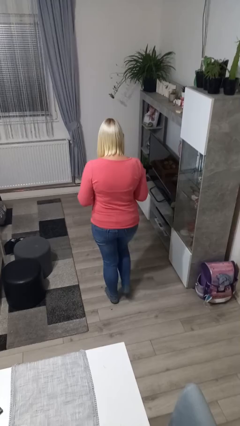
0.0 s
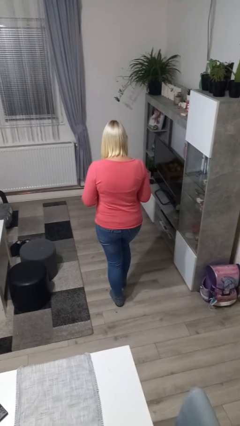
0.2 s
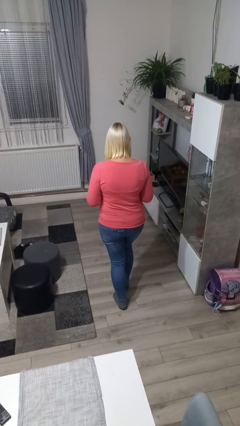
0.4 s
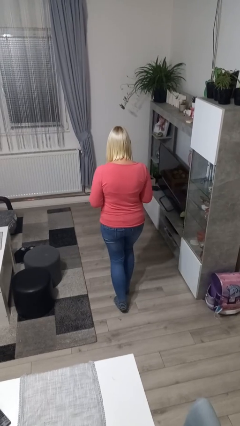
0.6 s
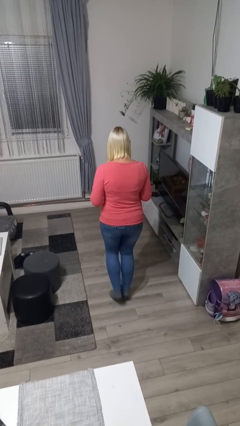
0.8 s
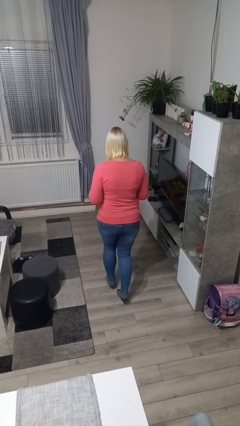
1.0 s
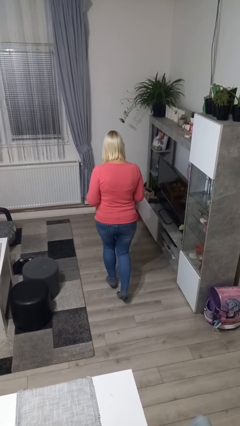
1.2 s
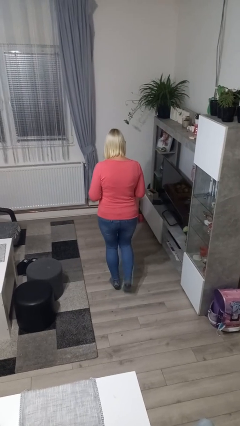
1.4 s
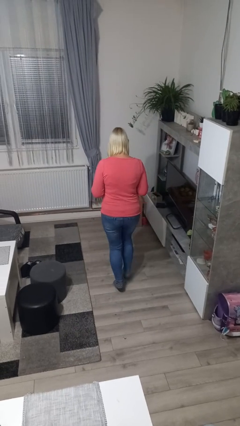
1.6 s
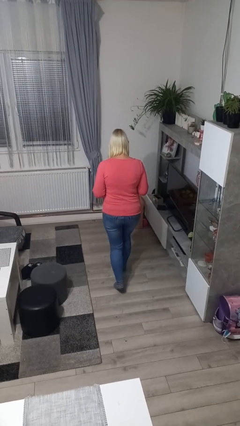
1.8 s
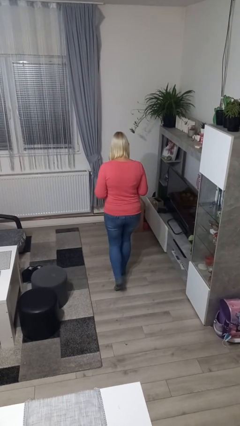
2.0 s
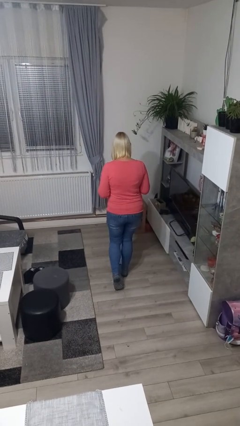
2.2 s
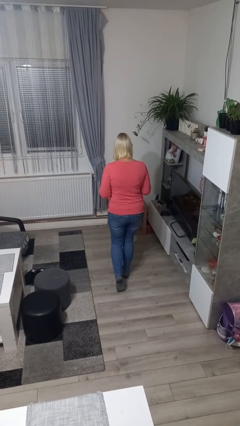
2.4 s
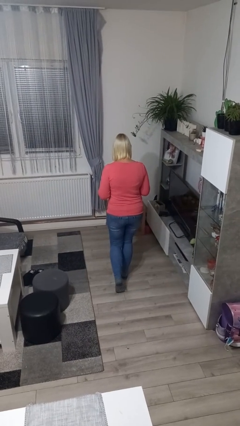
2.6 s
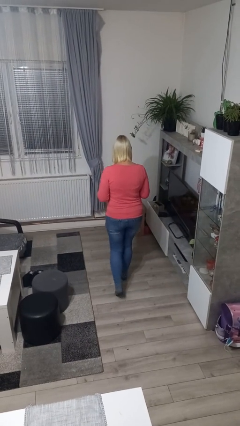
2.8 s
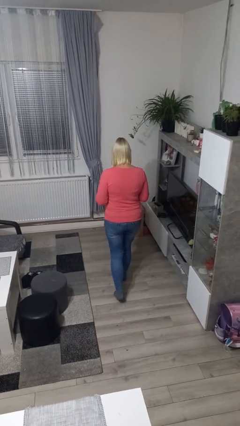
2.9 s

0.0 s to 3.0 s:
person walks tiptoe

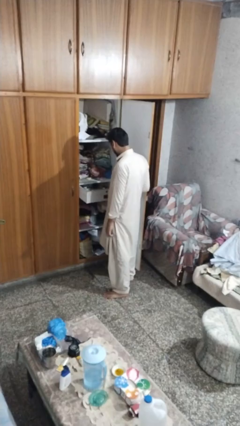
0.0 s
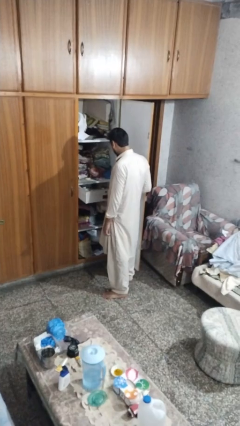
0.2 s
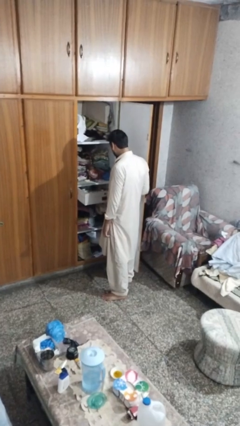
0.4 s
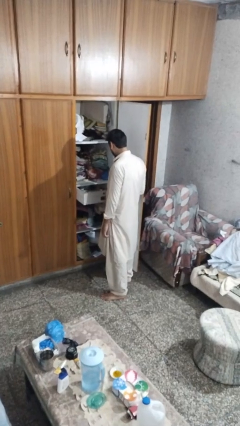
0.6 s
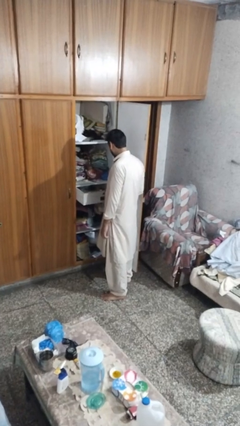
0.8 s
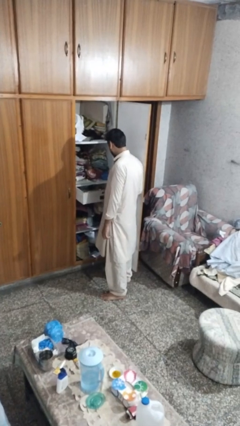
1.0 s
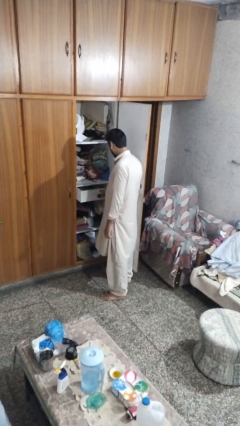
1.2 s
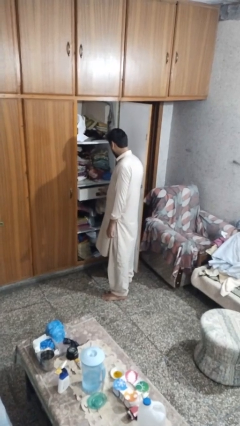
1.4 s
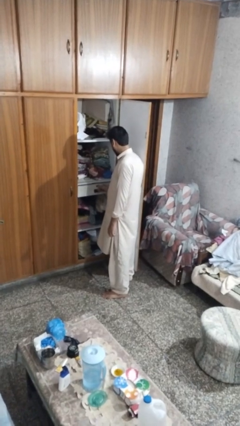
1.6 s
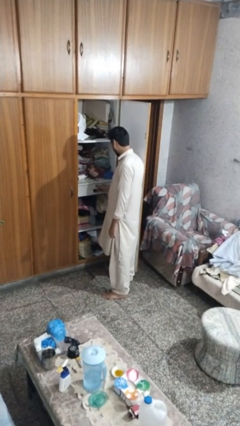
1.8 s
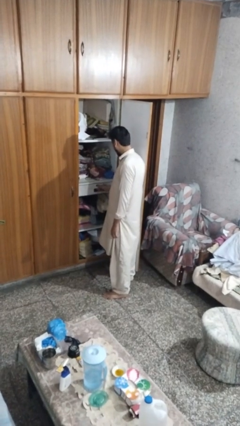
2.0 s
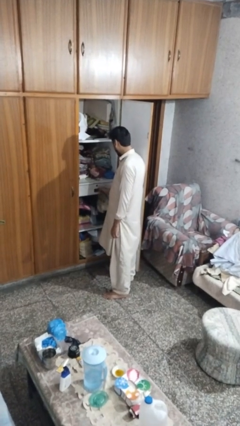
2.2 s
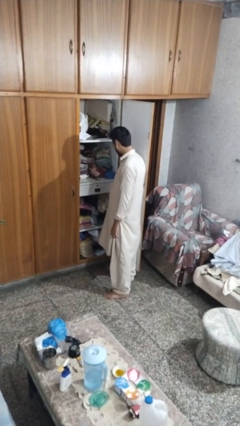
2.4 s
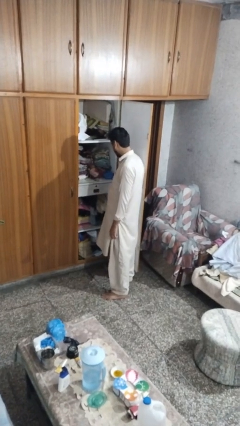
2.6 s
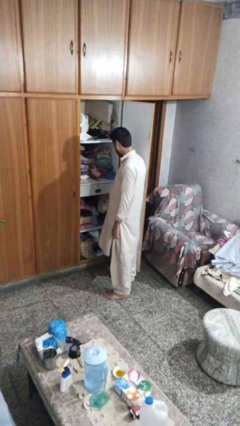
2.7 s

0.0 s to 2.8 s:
person closes dresser drawer

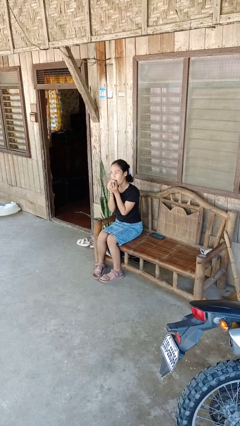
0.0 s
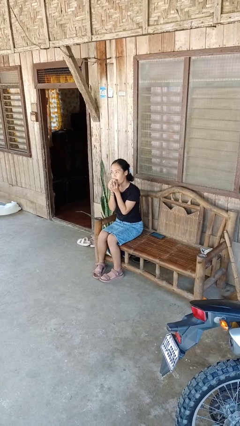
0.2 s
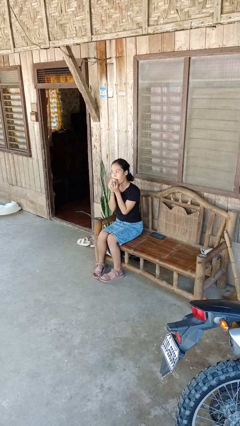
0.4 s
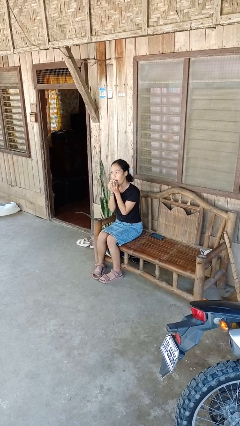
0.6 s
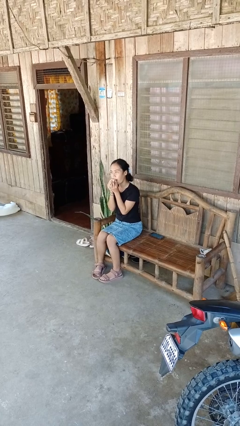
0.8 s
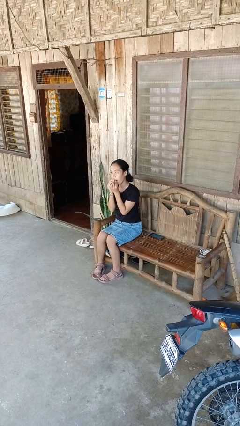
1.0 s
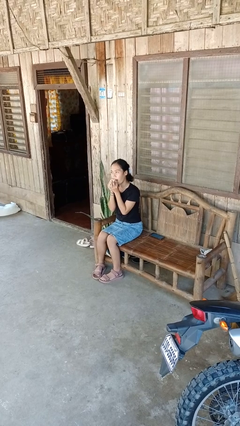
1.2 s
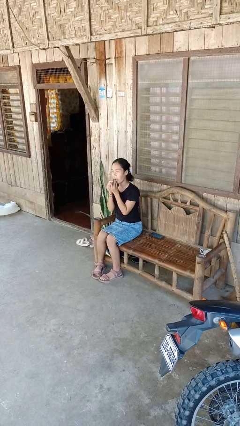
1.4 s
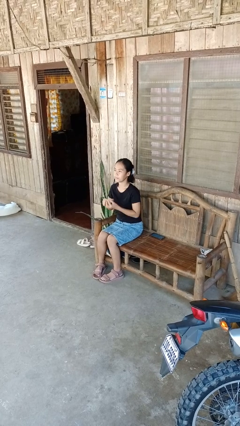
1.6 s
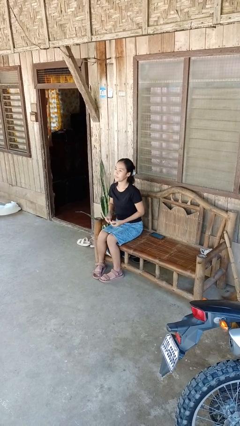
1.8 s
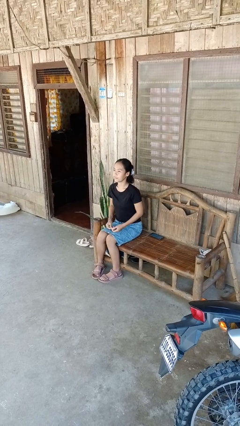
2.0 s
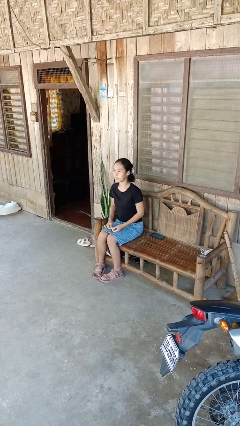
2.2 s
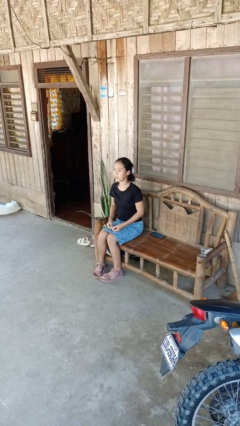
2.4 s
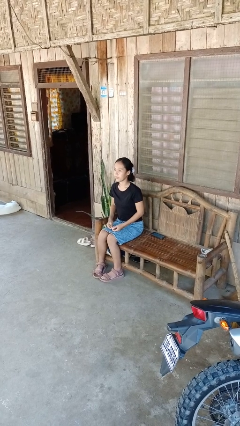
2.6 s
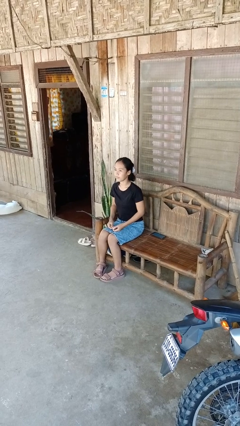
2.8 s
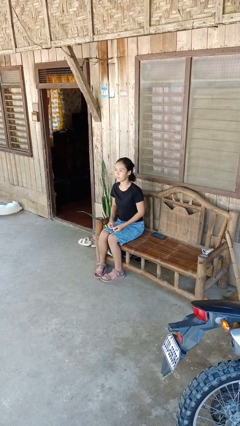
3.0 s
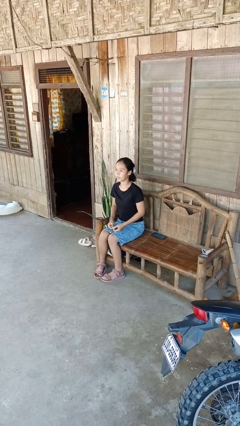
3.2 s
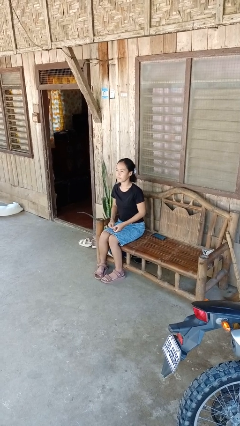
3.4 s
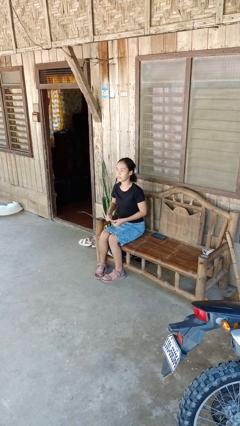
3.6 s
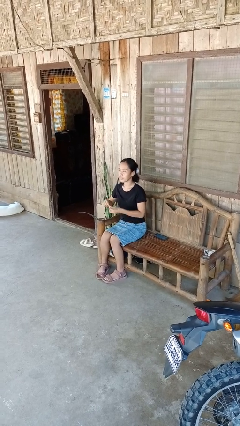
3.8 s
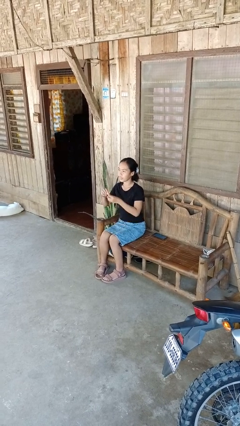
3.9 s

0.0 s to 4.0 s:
person flosses

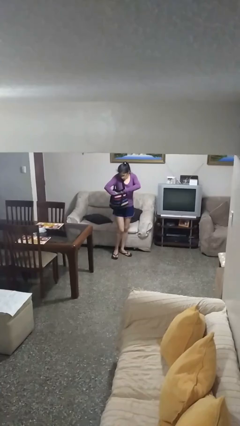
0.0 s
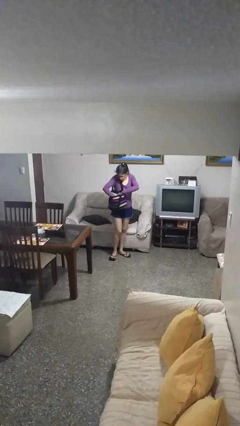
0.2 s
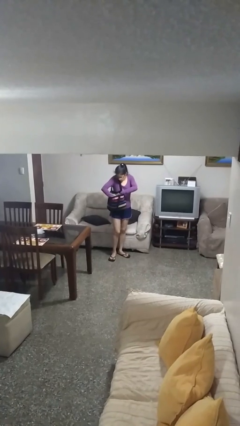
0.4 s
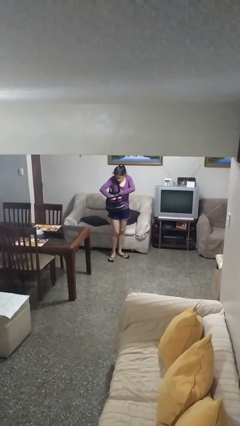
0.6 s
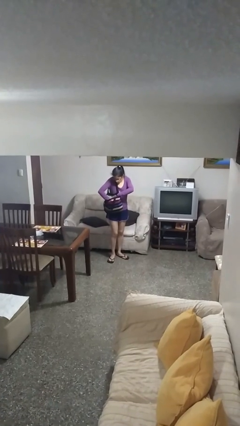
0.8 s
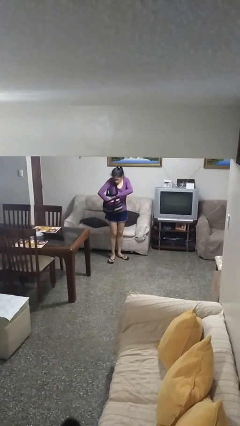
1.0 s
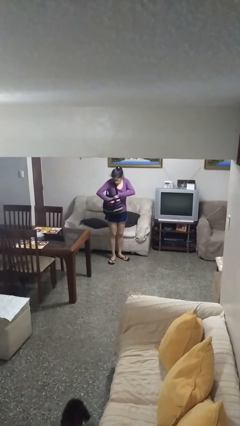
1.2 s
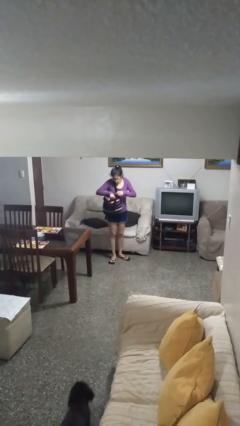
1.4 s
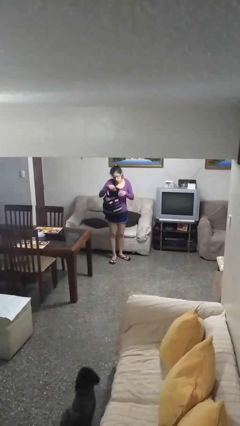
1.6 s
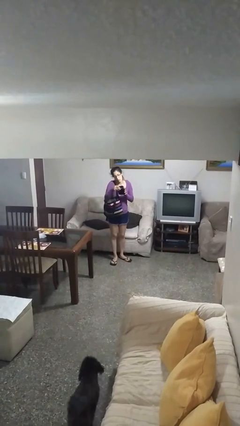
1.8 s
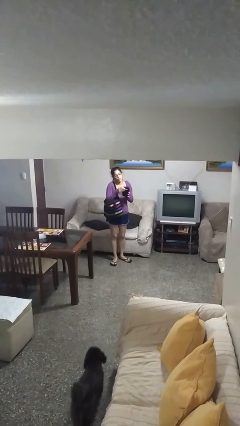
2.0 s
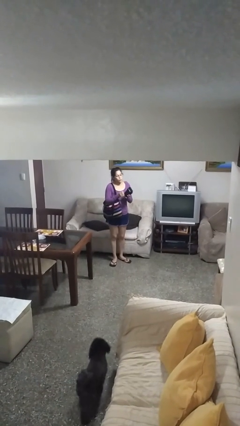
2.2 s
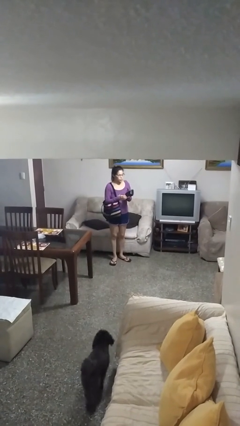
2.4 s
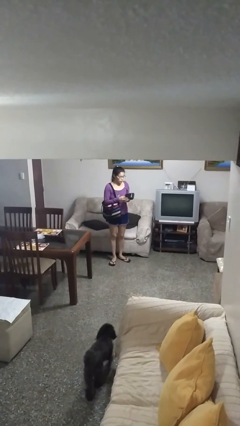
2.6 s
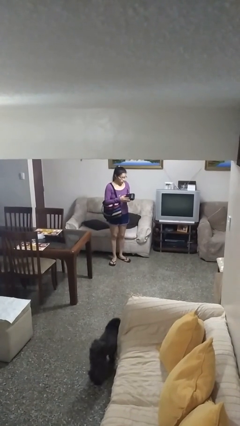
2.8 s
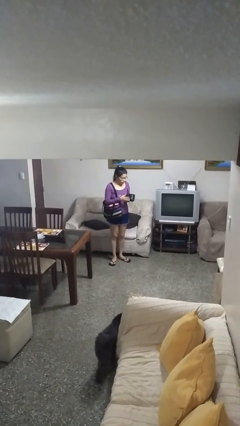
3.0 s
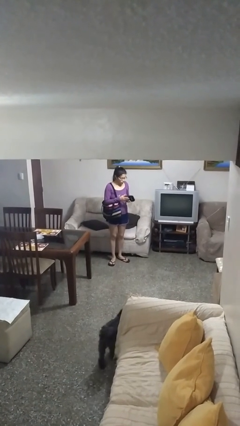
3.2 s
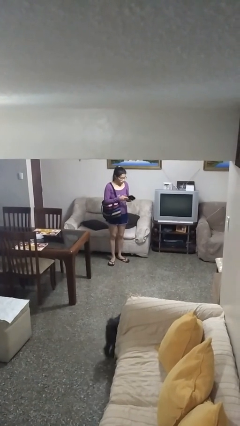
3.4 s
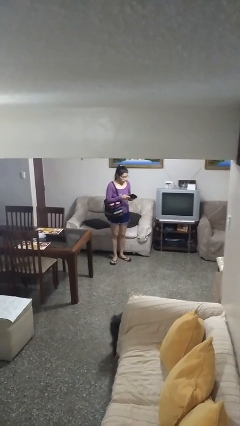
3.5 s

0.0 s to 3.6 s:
person takes object from purse

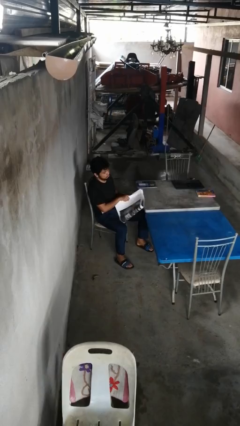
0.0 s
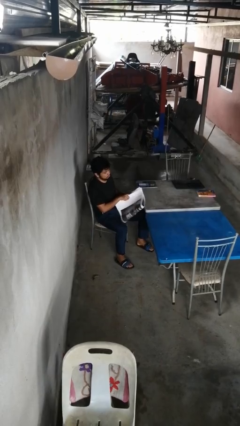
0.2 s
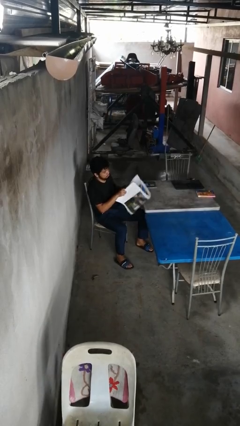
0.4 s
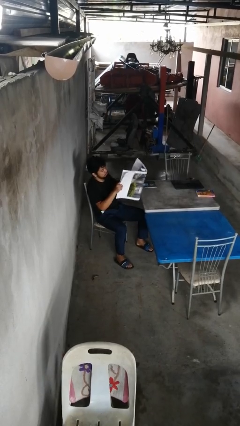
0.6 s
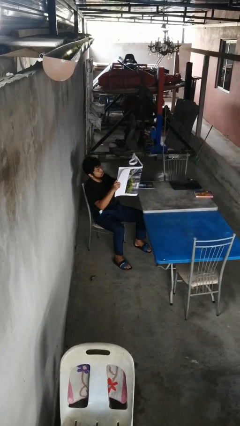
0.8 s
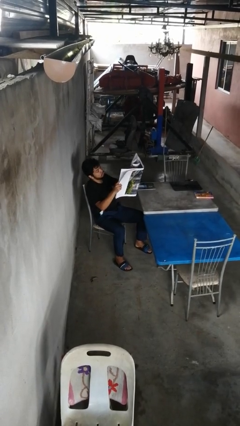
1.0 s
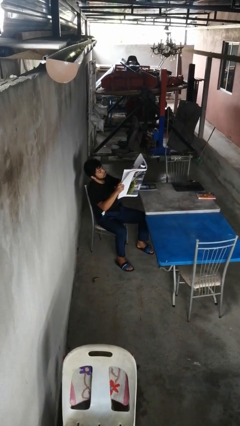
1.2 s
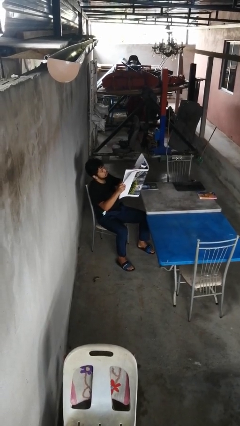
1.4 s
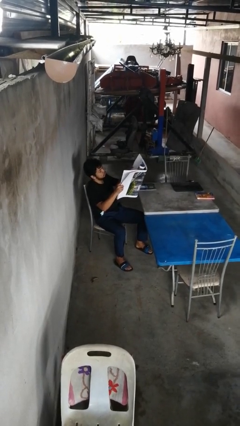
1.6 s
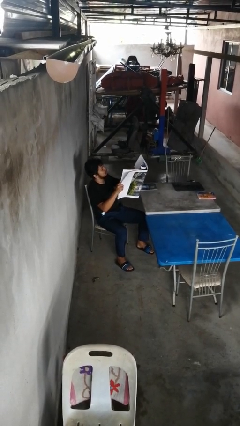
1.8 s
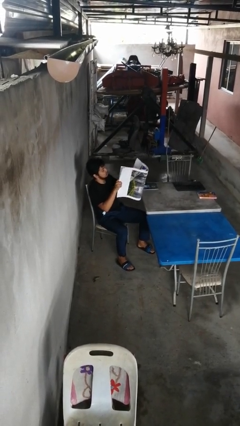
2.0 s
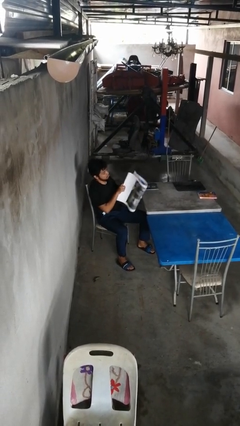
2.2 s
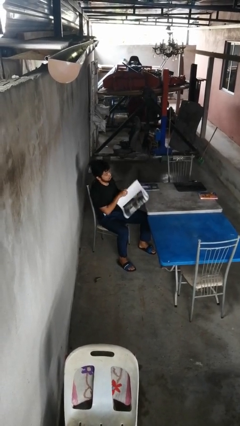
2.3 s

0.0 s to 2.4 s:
person reads newspaper

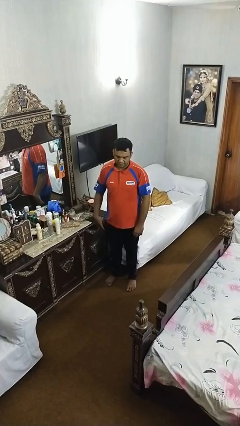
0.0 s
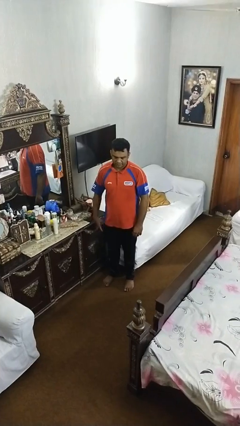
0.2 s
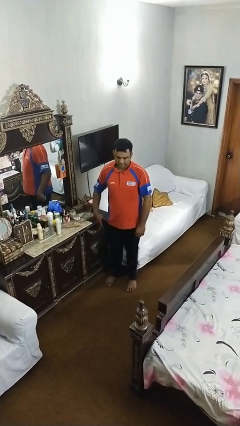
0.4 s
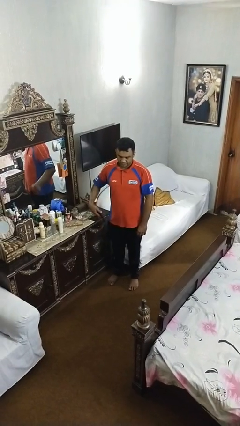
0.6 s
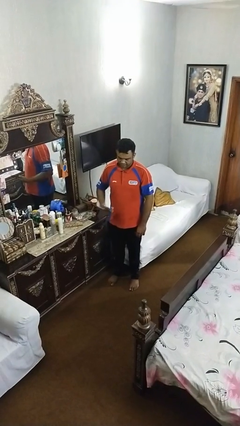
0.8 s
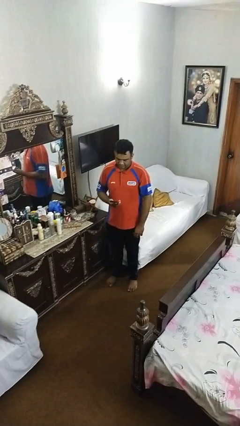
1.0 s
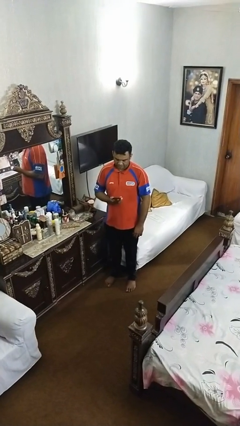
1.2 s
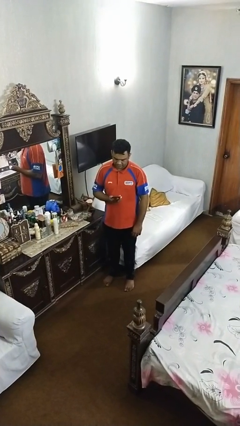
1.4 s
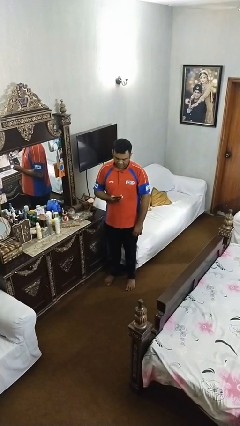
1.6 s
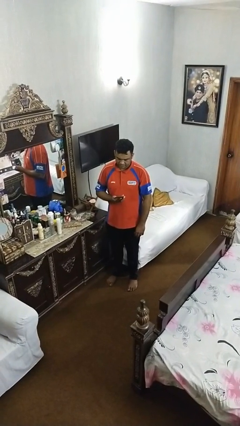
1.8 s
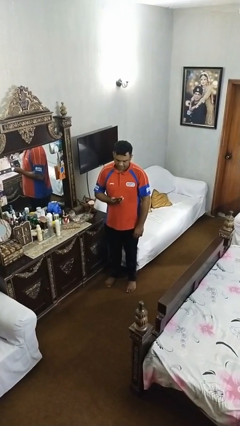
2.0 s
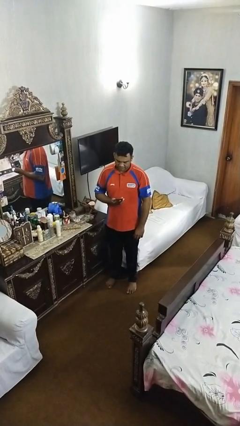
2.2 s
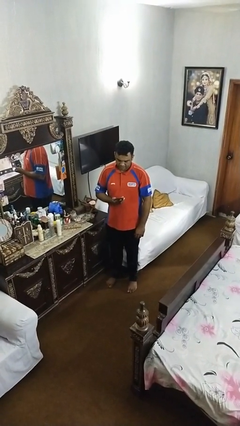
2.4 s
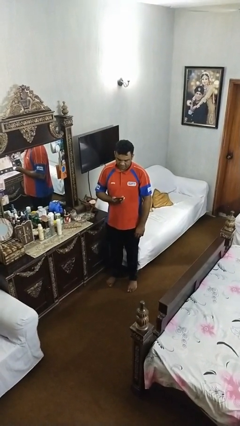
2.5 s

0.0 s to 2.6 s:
person takes phone from pocket
